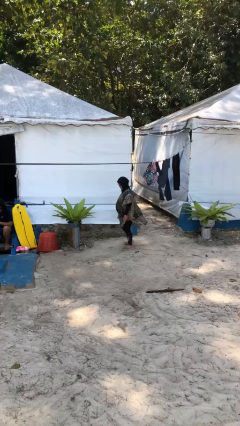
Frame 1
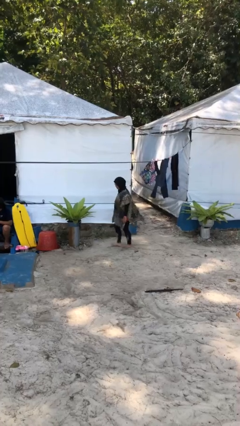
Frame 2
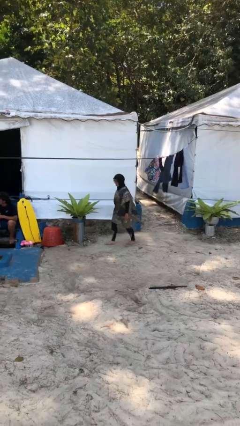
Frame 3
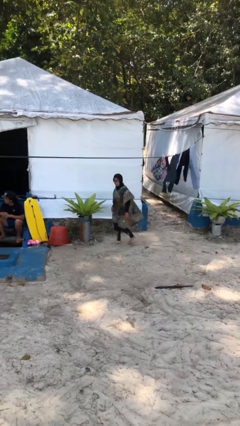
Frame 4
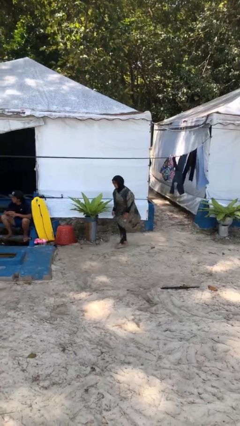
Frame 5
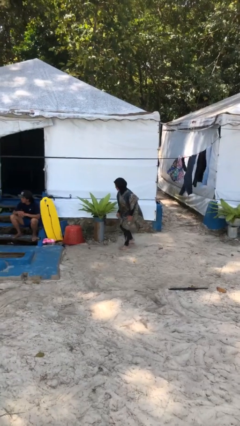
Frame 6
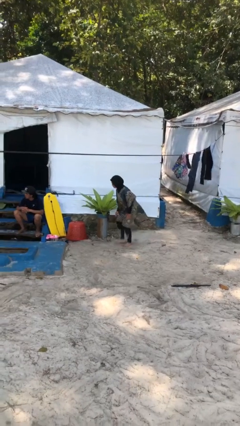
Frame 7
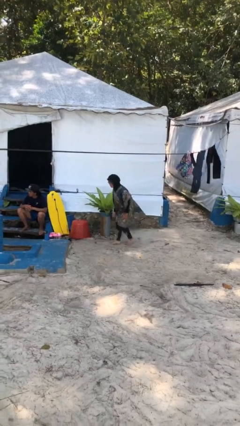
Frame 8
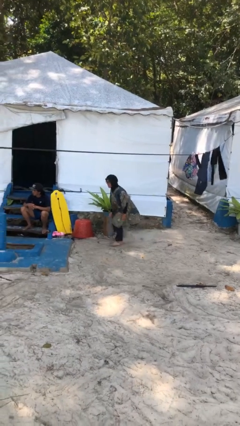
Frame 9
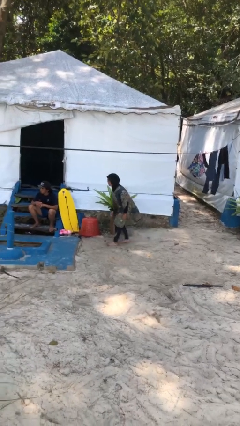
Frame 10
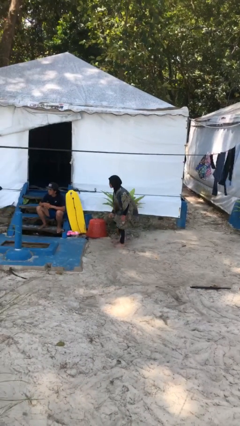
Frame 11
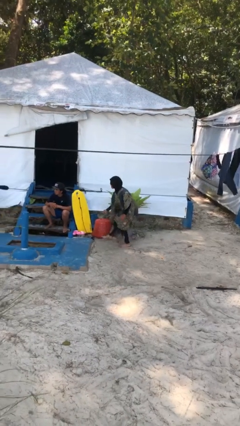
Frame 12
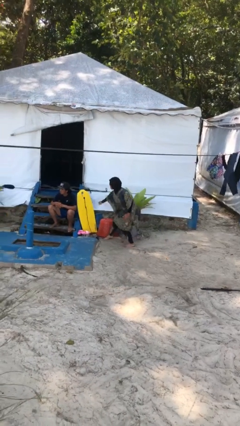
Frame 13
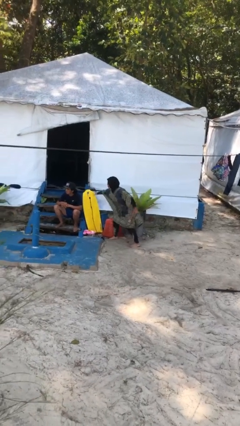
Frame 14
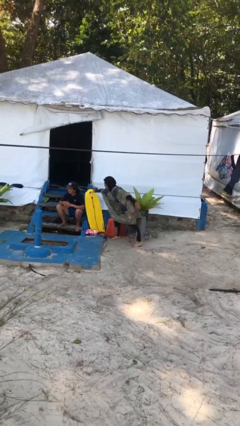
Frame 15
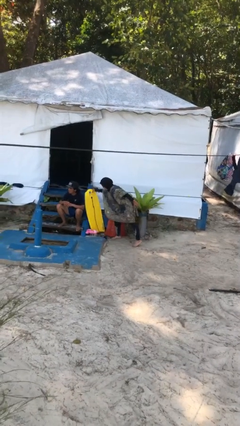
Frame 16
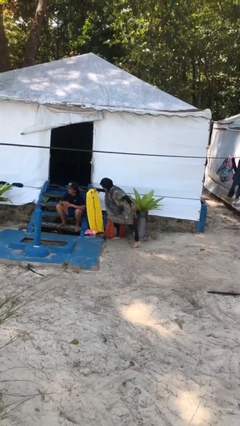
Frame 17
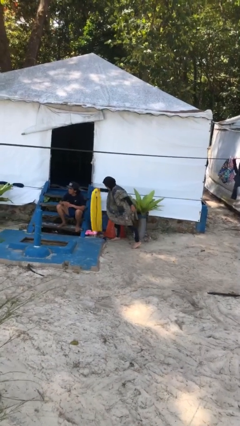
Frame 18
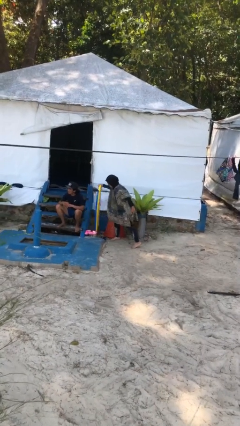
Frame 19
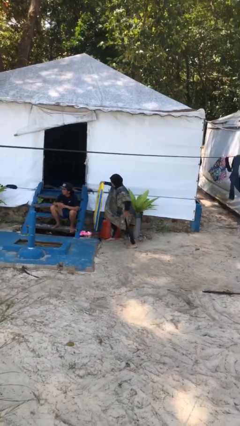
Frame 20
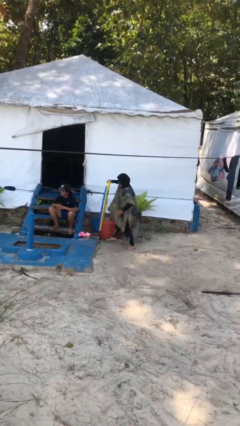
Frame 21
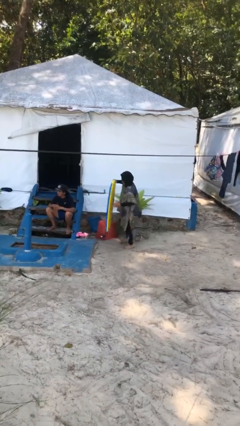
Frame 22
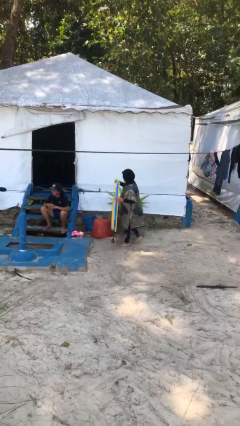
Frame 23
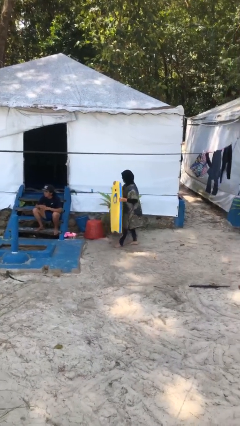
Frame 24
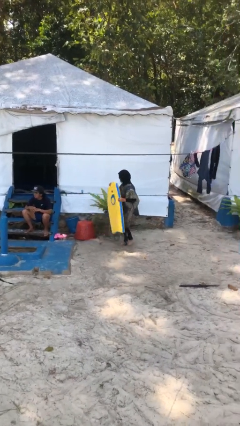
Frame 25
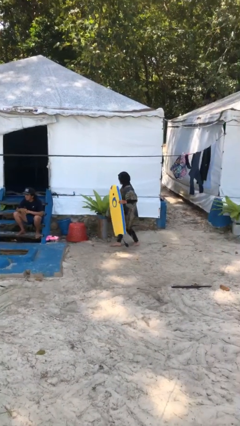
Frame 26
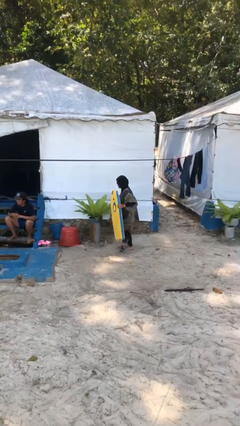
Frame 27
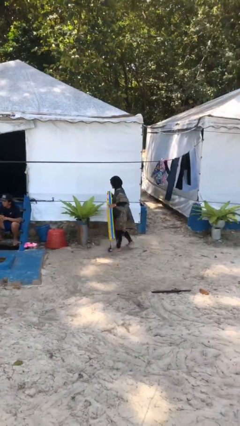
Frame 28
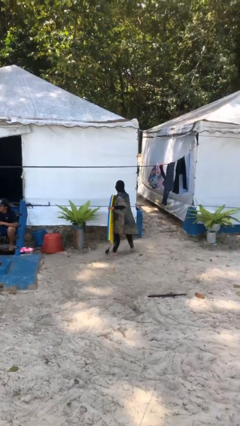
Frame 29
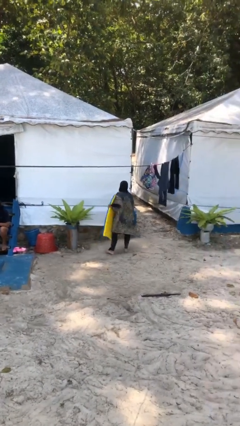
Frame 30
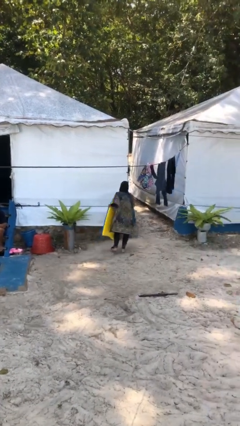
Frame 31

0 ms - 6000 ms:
person steals object from person

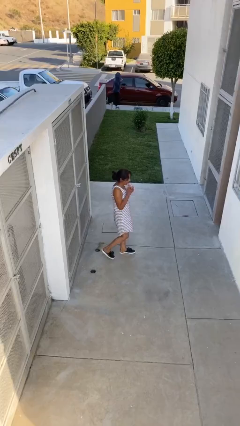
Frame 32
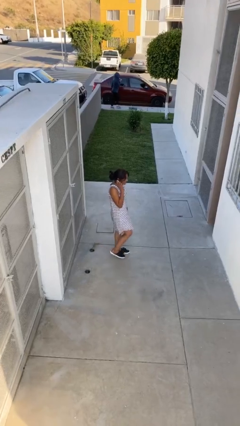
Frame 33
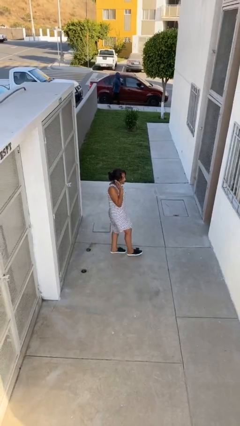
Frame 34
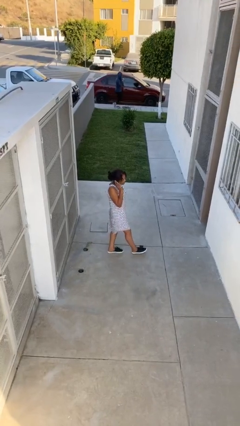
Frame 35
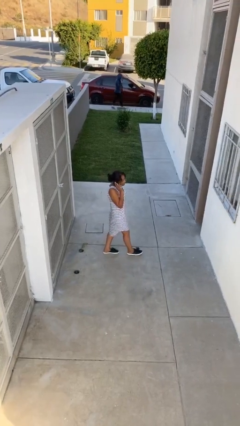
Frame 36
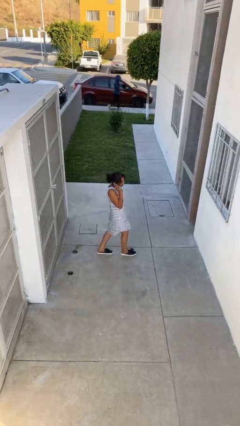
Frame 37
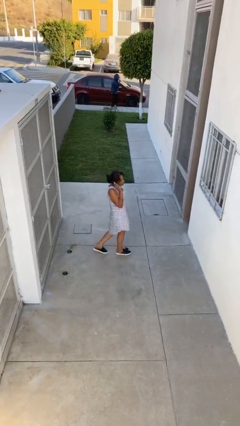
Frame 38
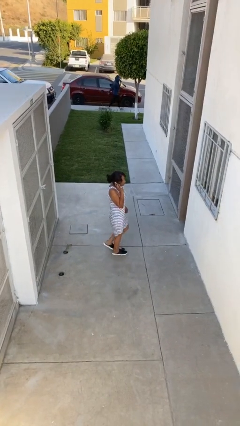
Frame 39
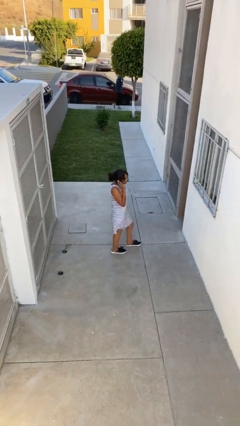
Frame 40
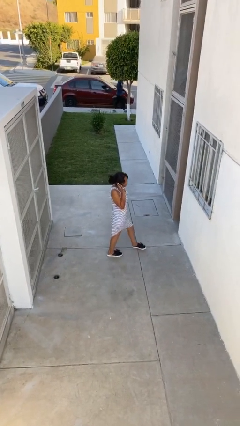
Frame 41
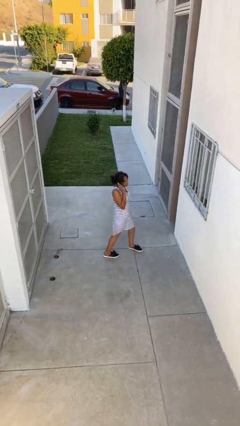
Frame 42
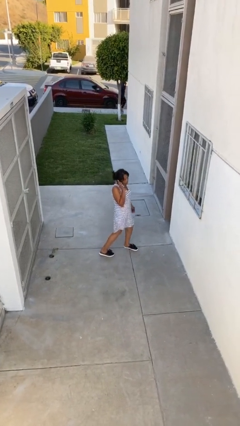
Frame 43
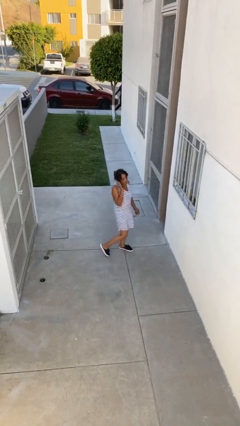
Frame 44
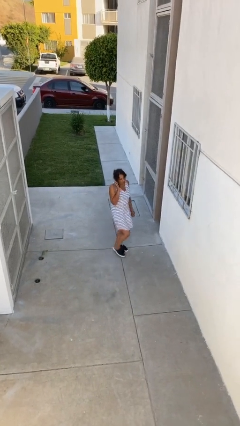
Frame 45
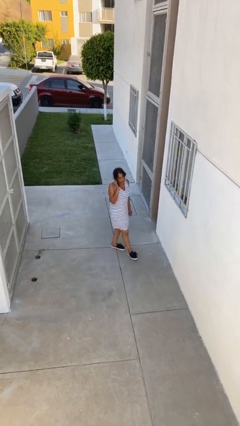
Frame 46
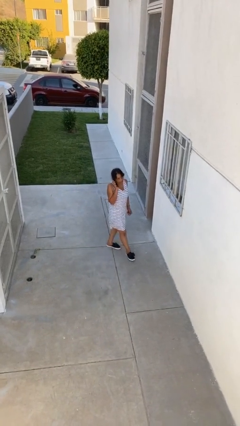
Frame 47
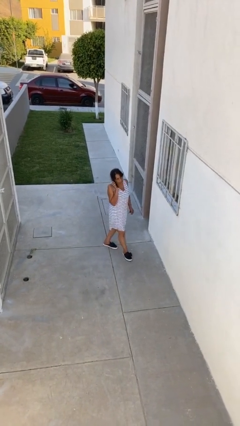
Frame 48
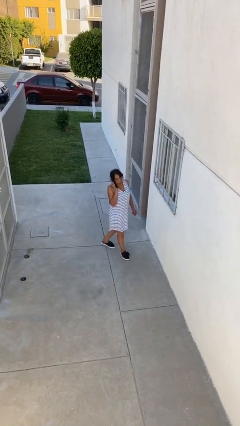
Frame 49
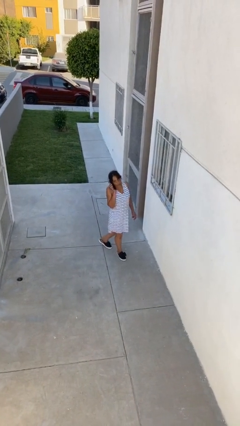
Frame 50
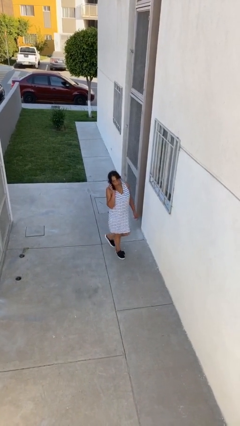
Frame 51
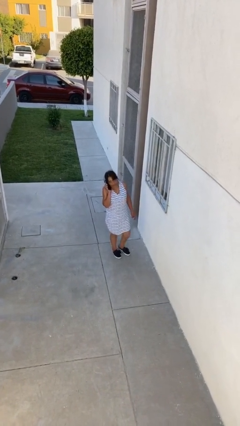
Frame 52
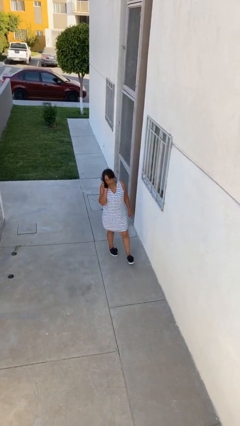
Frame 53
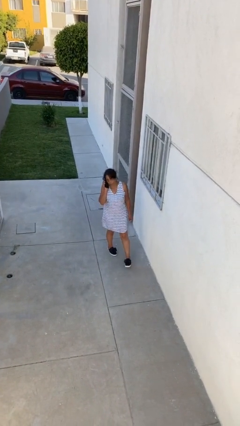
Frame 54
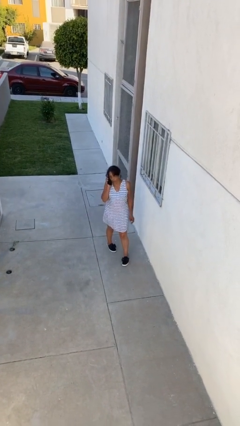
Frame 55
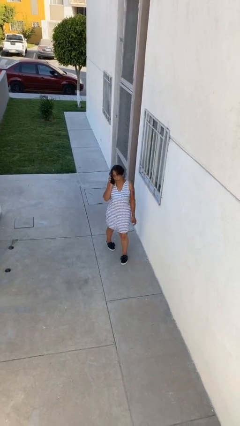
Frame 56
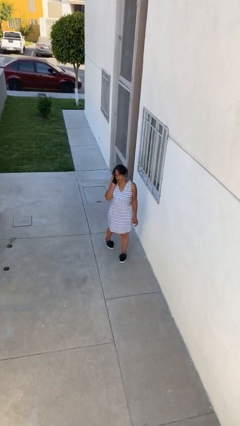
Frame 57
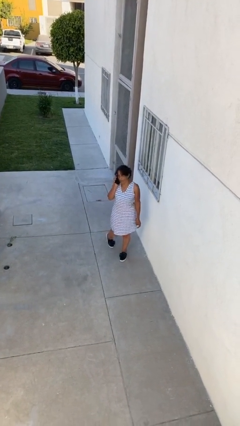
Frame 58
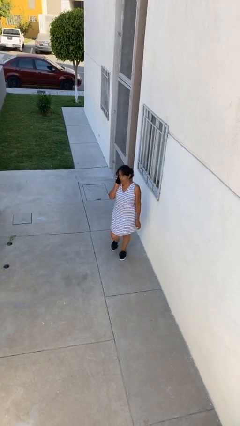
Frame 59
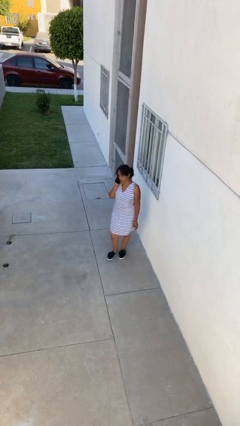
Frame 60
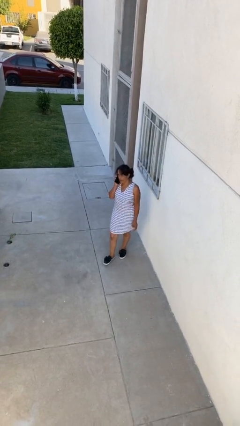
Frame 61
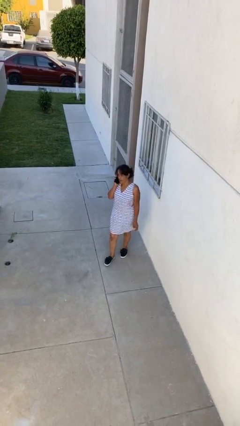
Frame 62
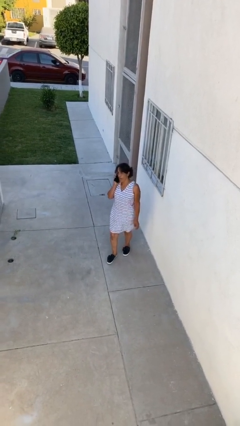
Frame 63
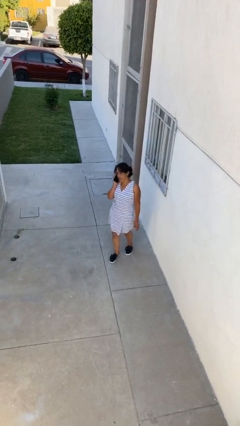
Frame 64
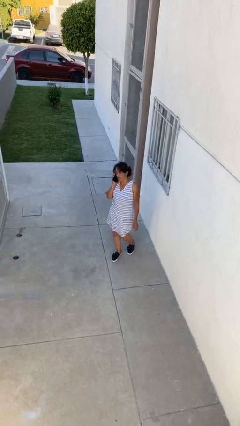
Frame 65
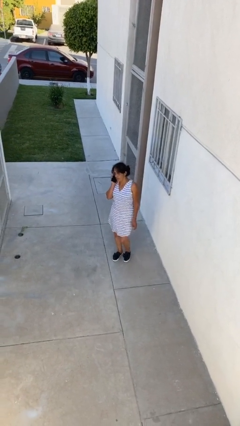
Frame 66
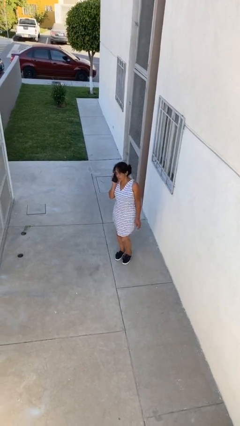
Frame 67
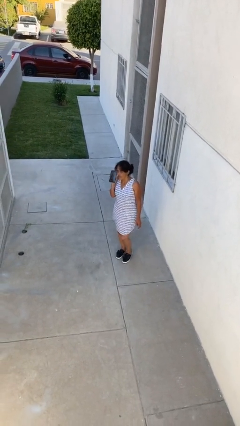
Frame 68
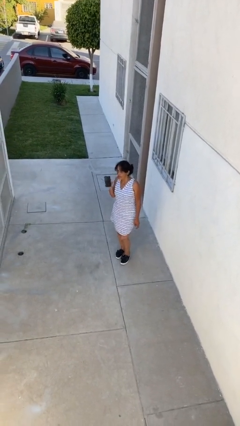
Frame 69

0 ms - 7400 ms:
person talks on phone

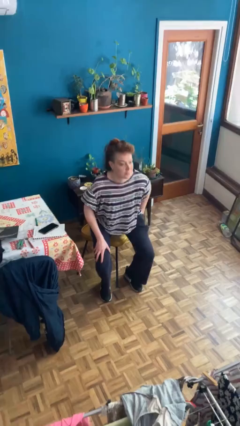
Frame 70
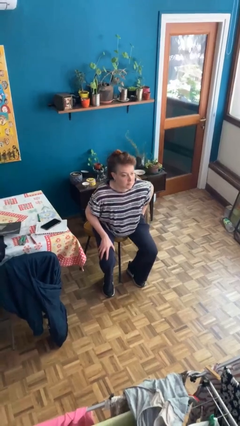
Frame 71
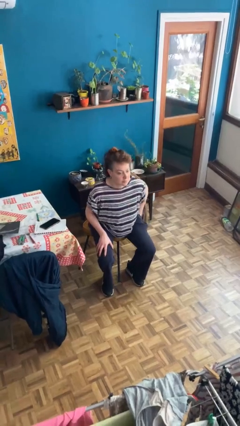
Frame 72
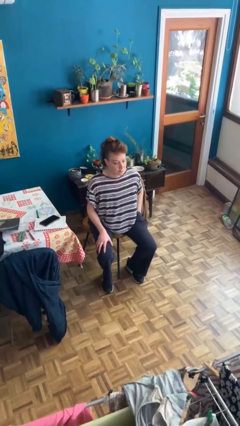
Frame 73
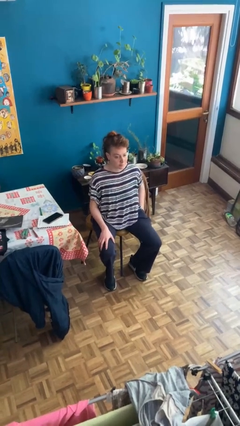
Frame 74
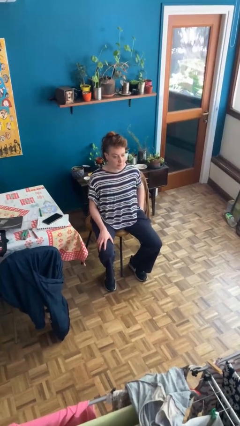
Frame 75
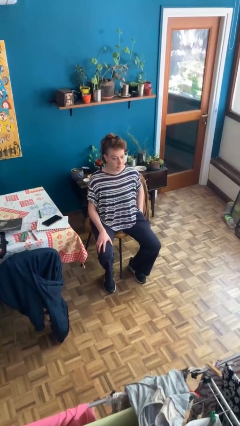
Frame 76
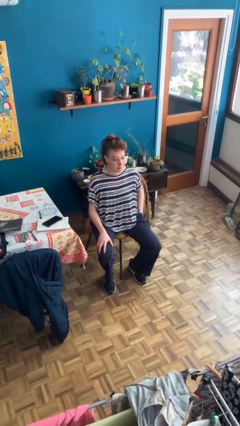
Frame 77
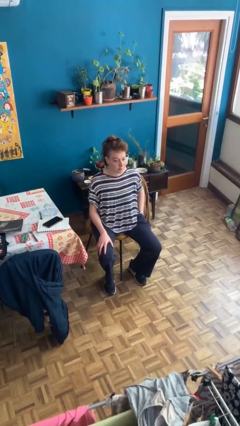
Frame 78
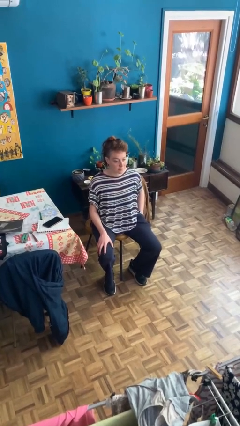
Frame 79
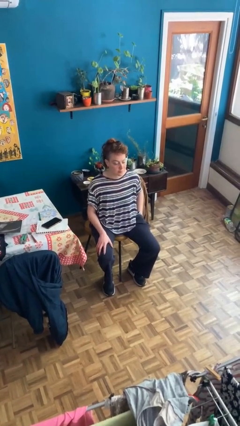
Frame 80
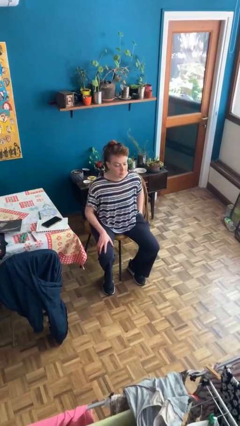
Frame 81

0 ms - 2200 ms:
person sits down

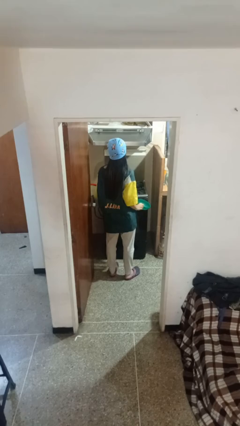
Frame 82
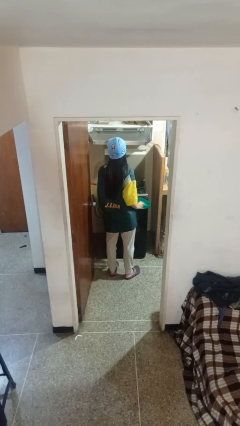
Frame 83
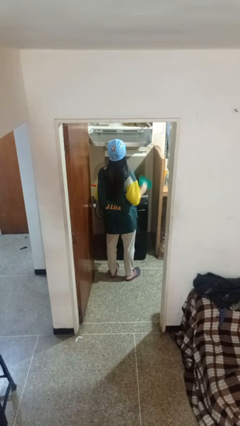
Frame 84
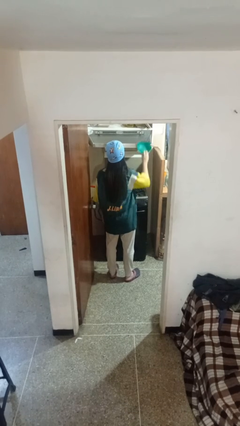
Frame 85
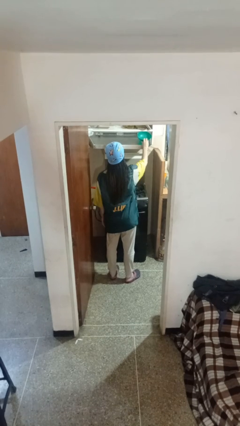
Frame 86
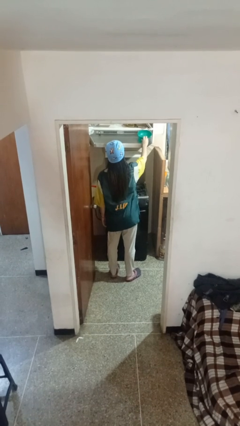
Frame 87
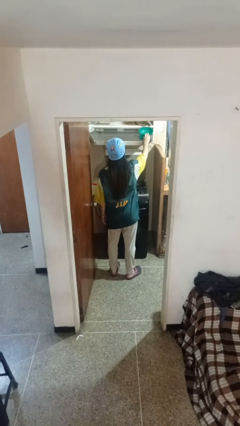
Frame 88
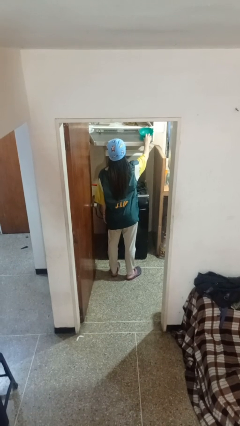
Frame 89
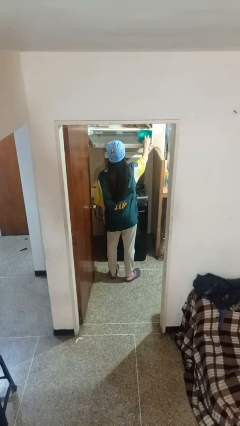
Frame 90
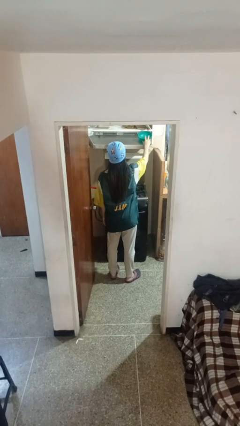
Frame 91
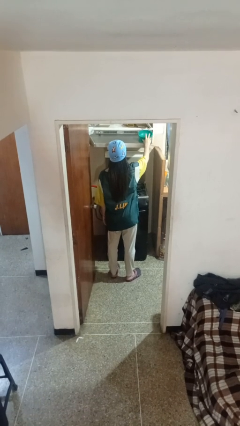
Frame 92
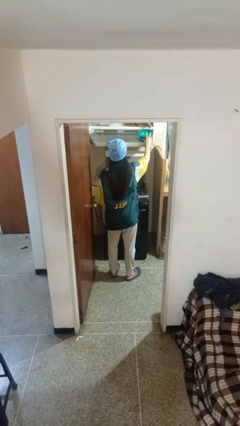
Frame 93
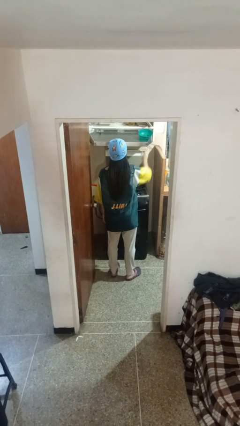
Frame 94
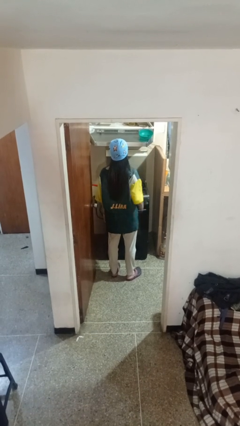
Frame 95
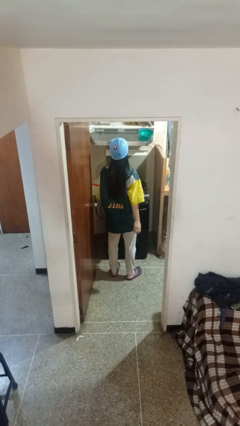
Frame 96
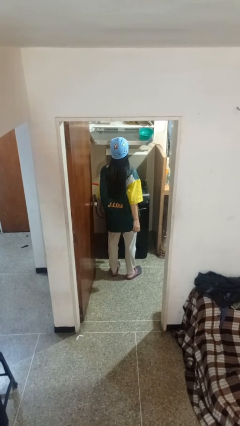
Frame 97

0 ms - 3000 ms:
person puts down object on countertop
